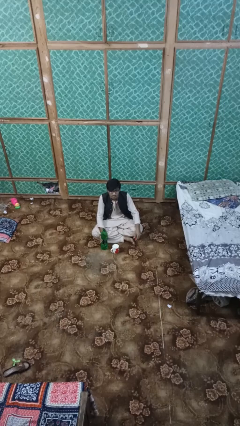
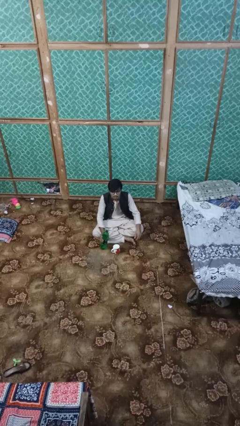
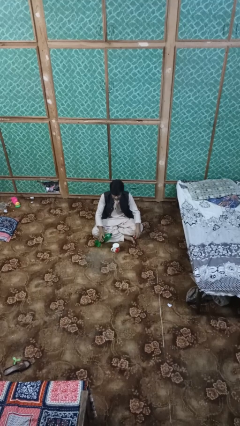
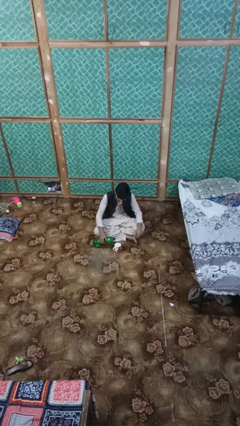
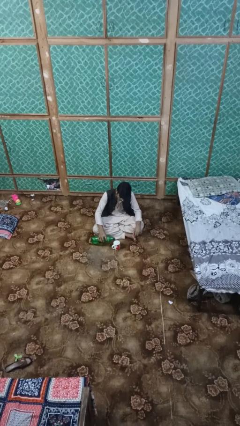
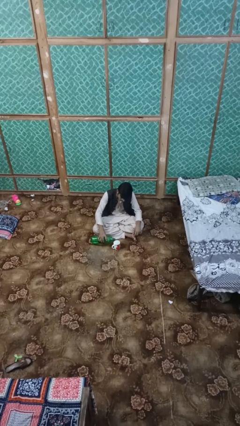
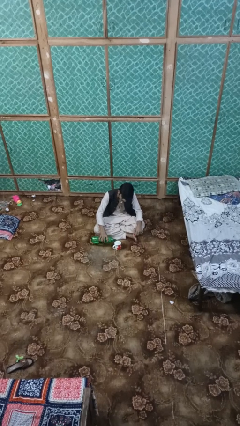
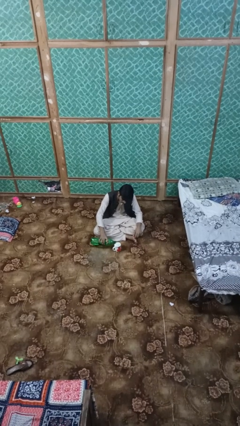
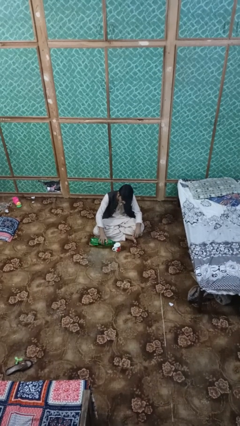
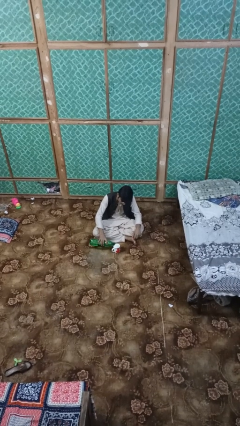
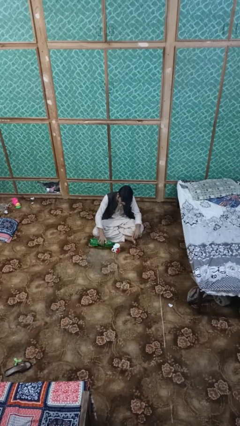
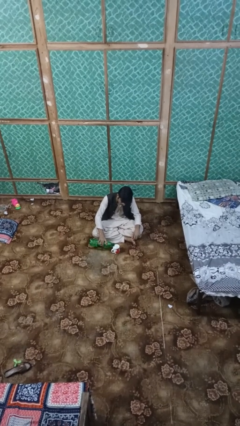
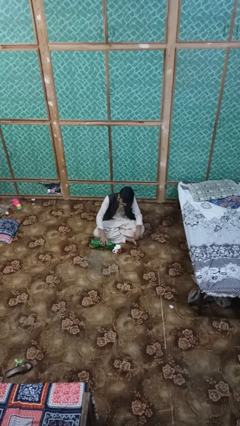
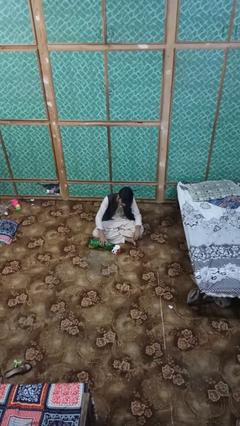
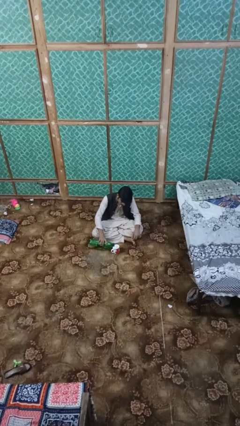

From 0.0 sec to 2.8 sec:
person pours liquid into cup

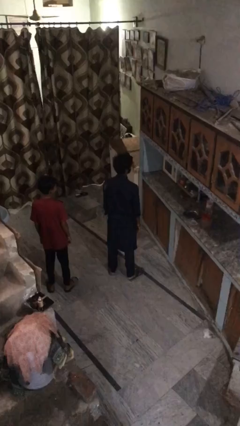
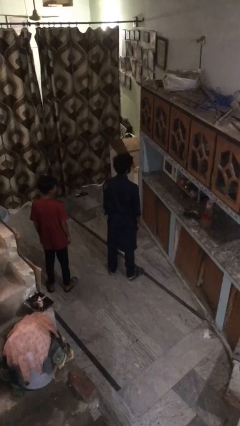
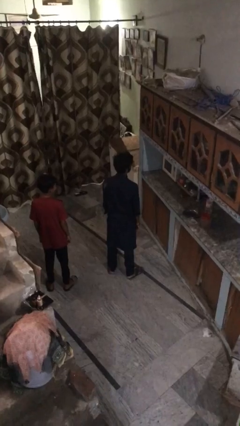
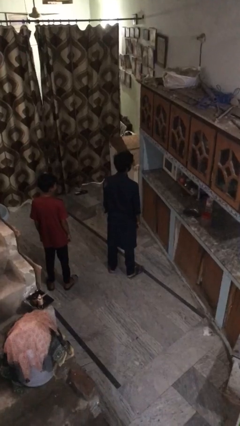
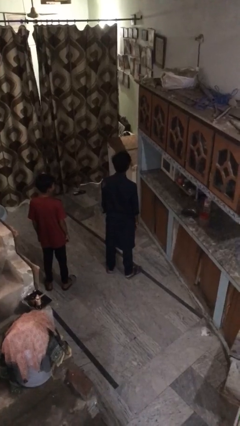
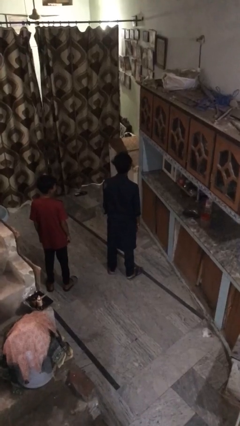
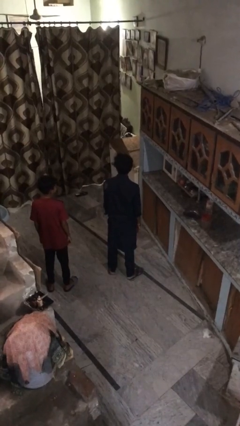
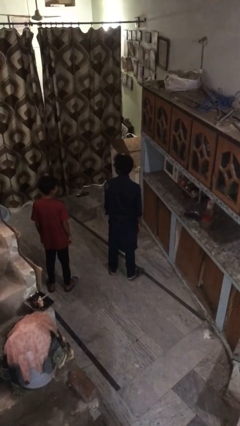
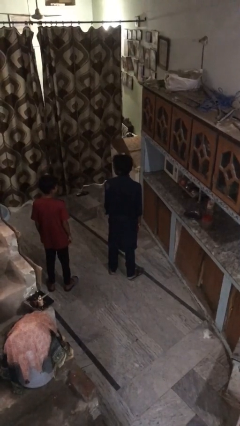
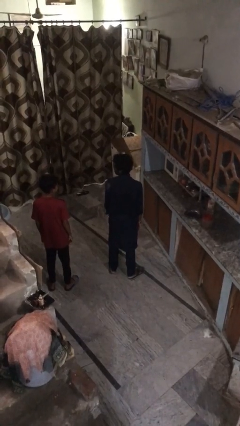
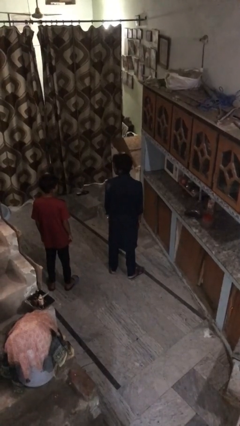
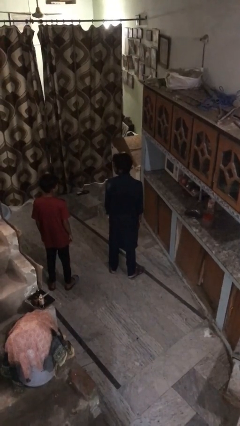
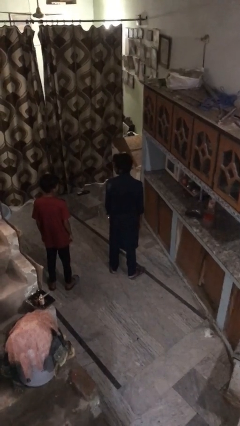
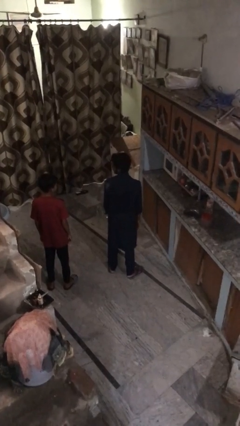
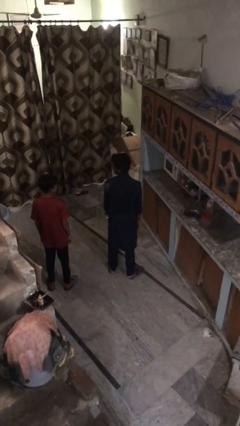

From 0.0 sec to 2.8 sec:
person looks over shoulder

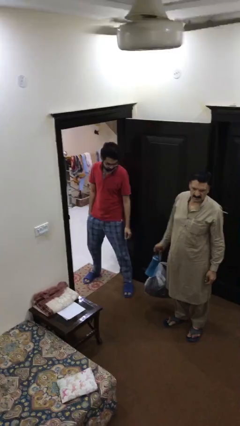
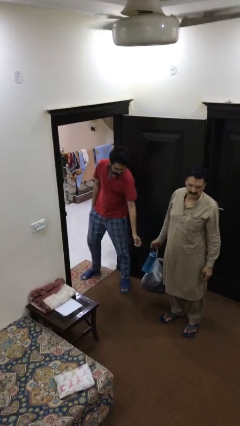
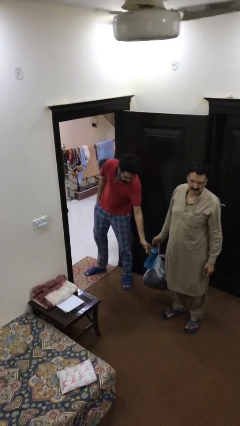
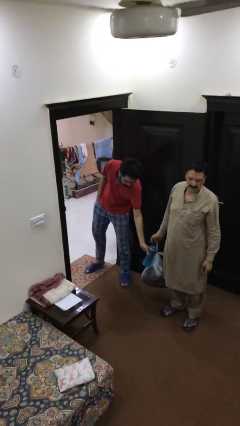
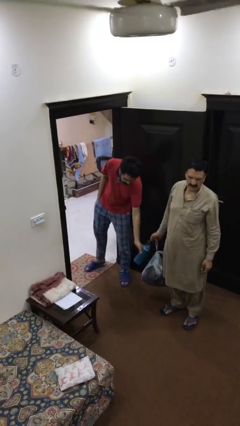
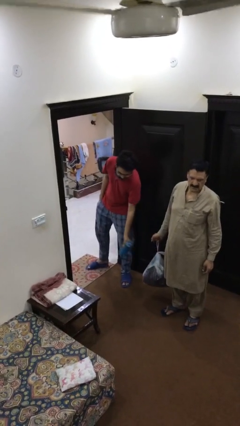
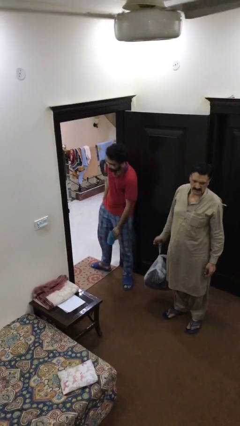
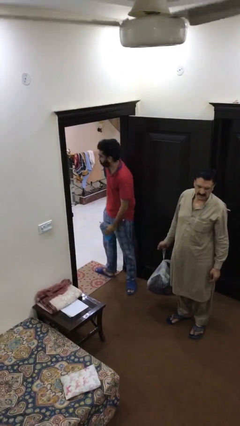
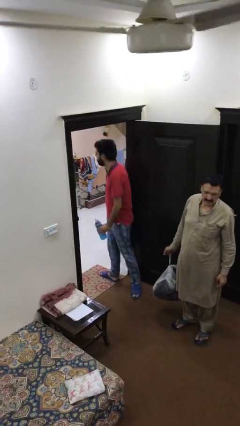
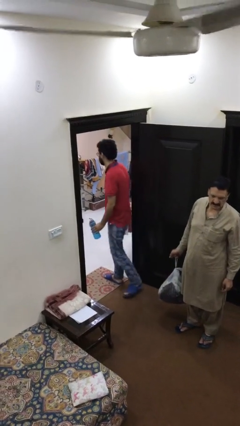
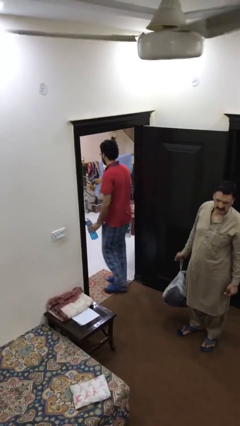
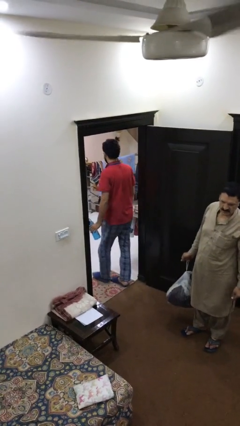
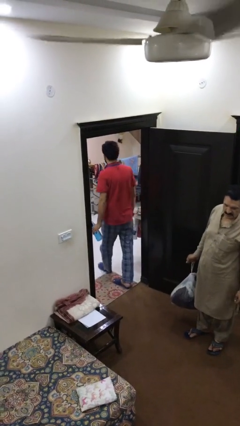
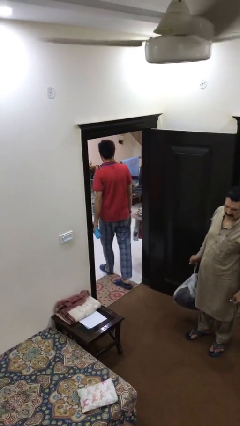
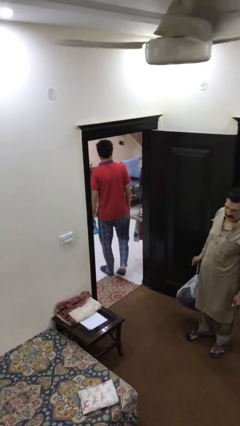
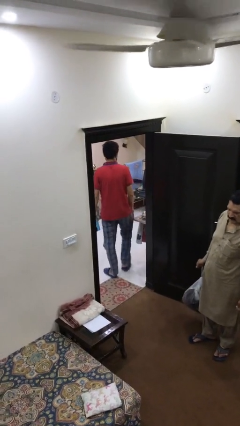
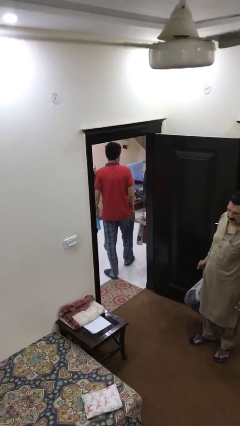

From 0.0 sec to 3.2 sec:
person steals object from person

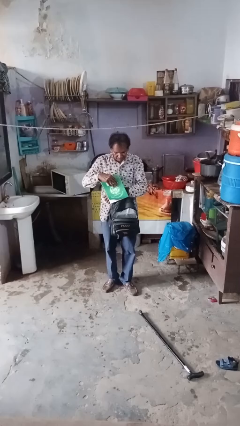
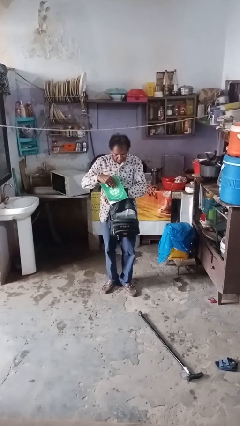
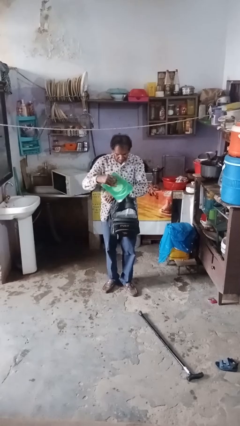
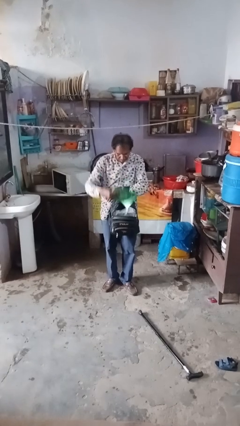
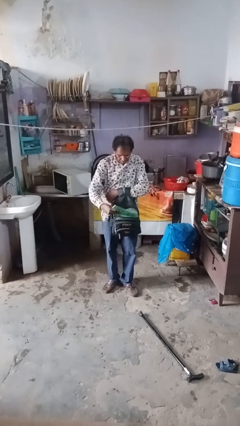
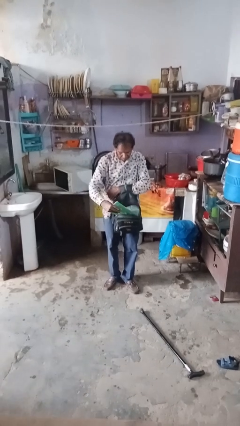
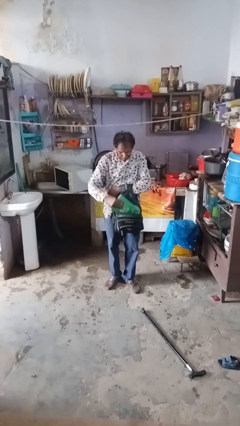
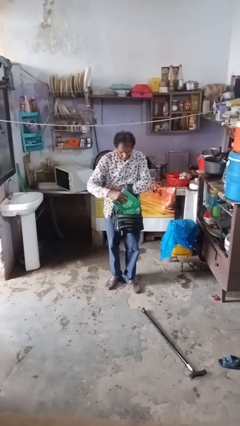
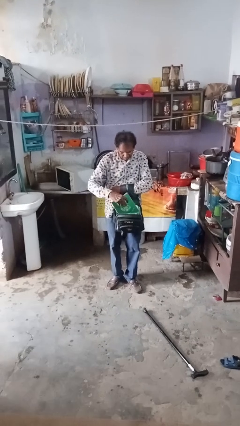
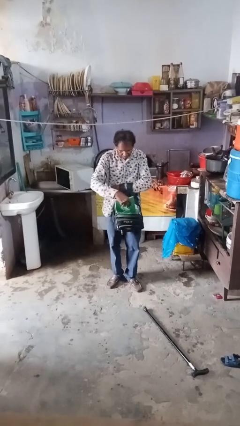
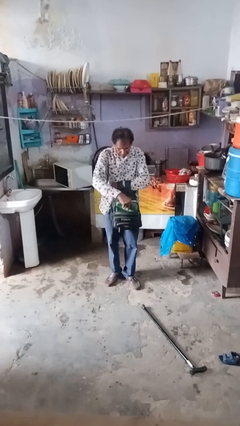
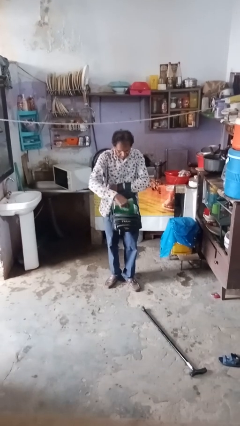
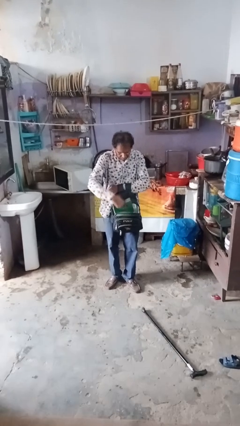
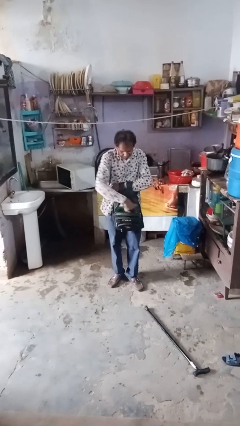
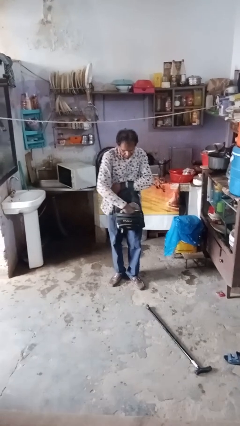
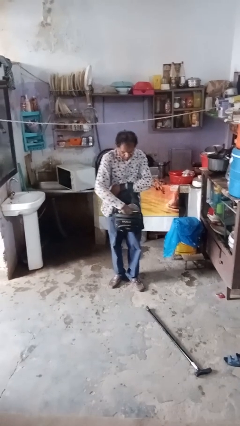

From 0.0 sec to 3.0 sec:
person puts object into bag

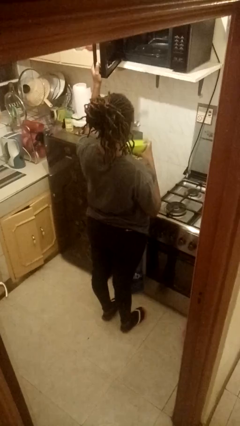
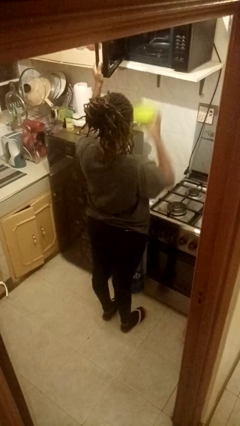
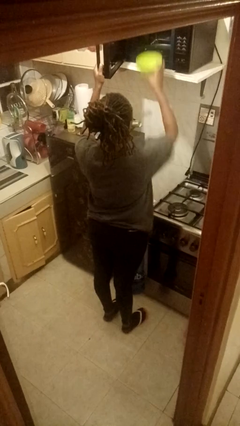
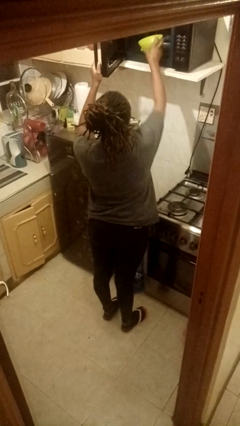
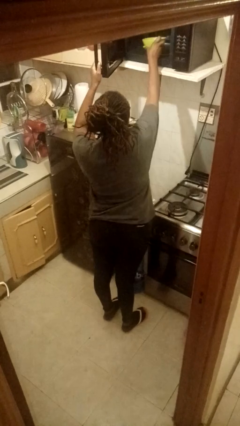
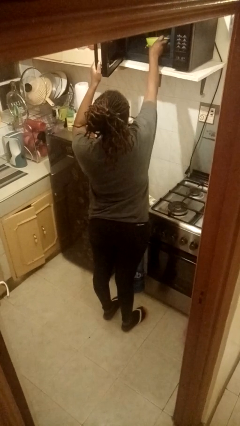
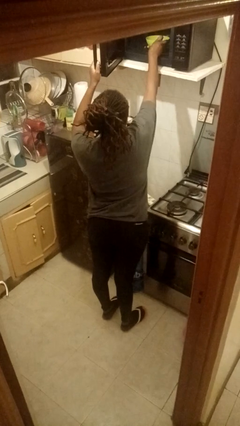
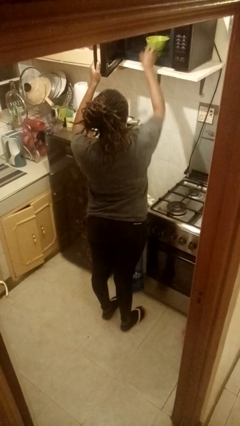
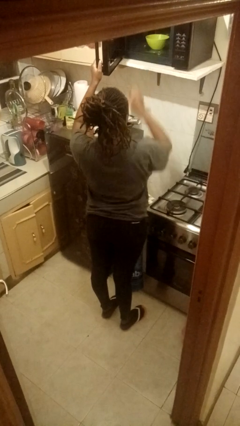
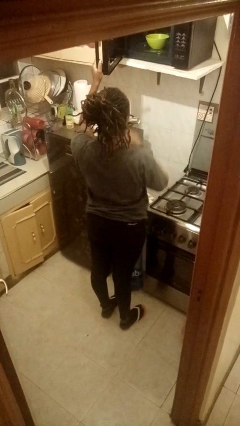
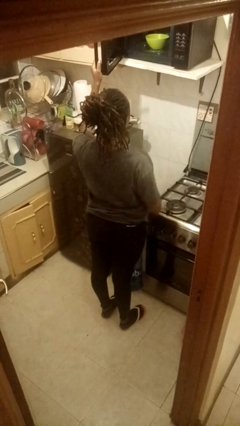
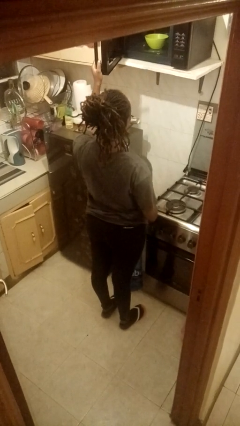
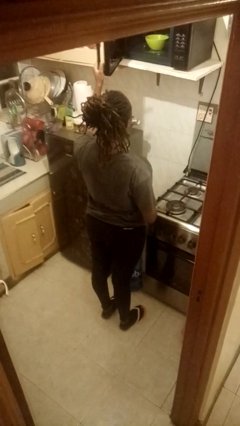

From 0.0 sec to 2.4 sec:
person puts object into microwave

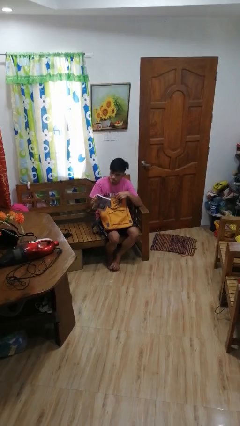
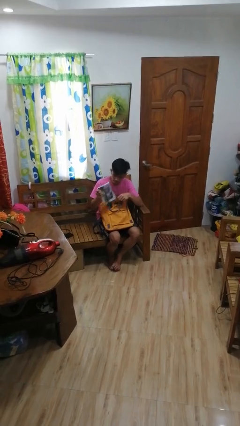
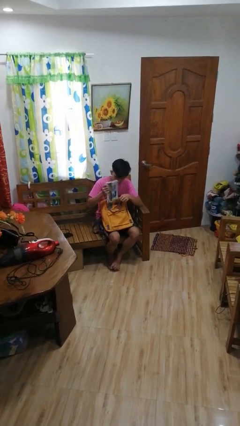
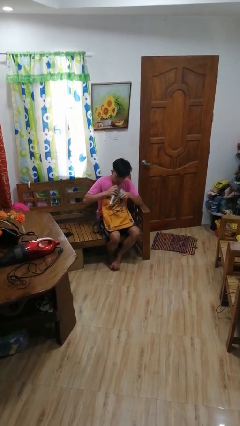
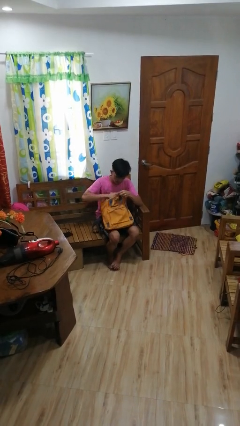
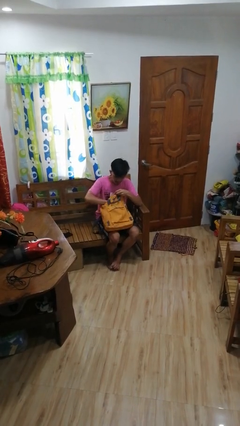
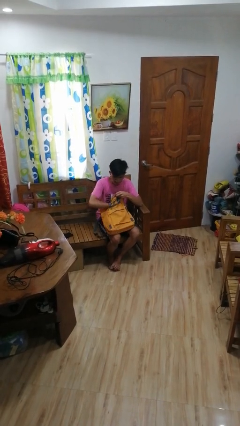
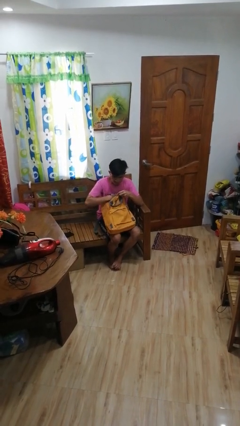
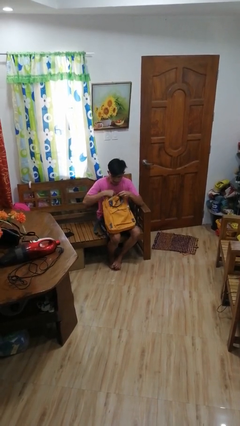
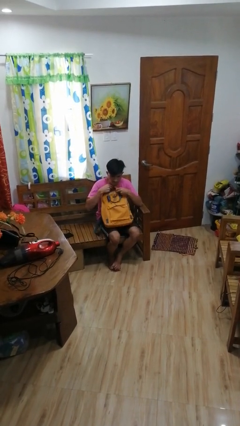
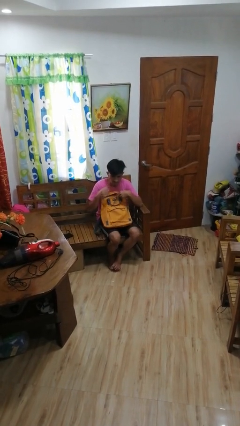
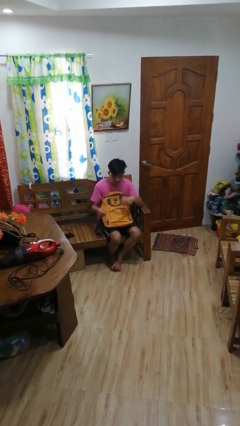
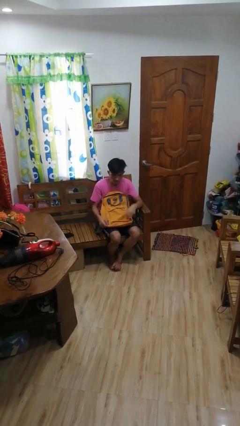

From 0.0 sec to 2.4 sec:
person puts object into backpack

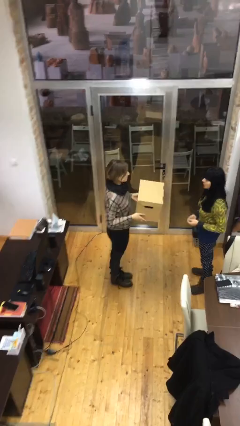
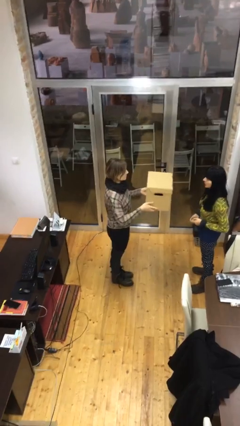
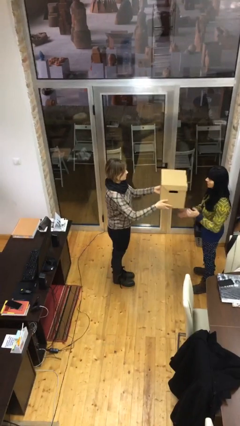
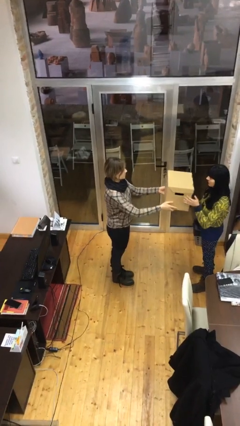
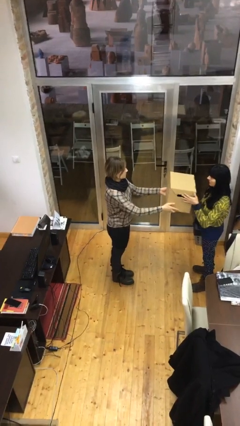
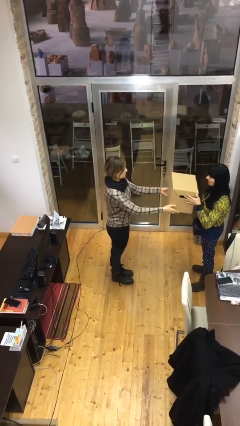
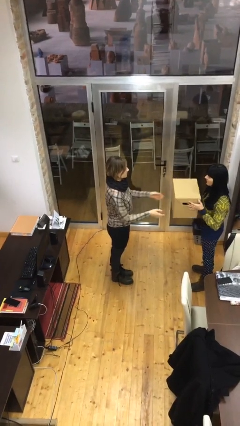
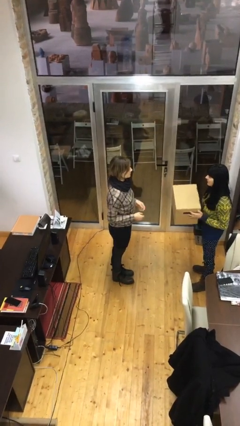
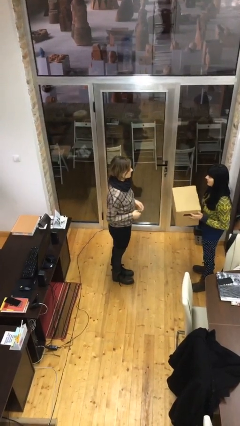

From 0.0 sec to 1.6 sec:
person transfers object to person
